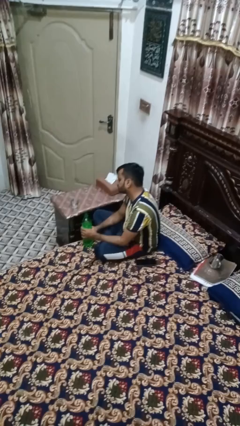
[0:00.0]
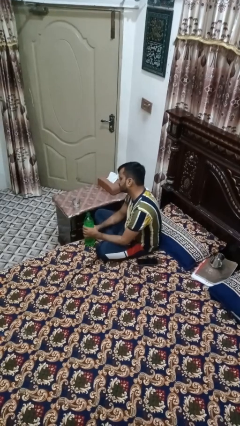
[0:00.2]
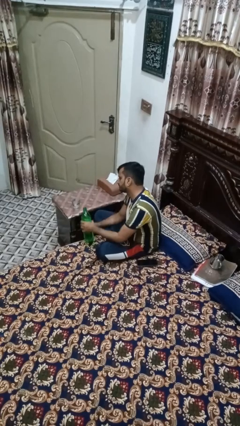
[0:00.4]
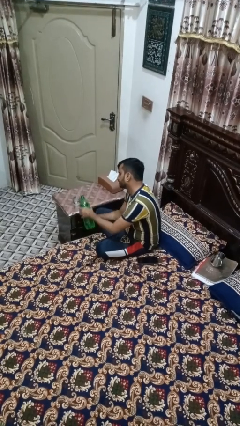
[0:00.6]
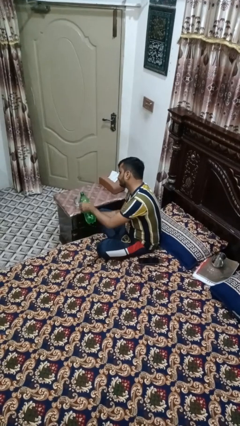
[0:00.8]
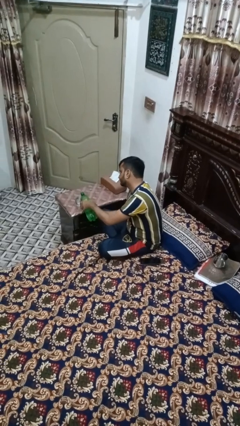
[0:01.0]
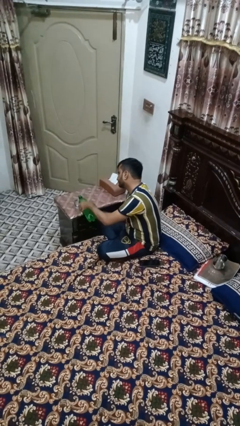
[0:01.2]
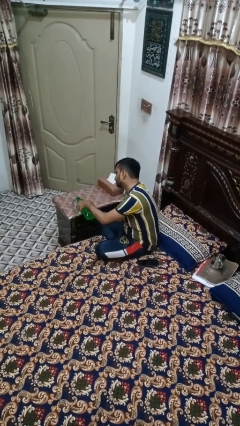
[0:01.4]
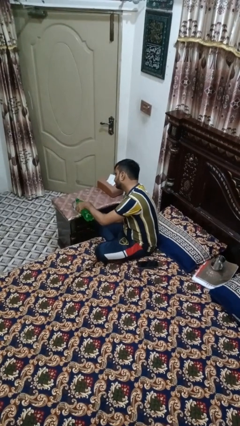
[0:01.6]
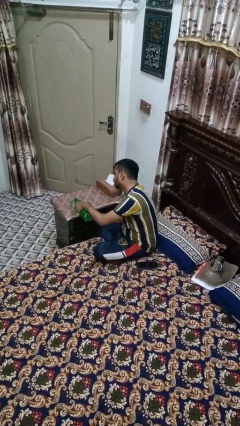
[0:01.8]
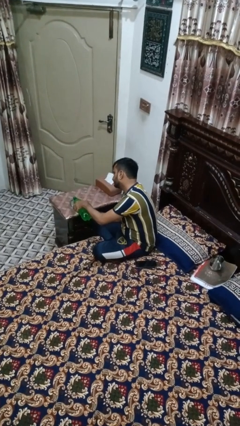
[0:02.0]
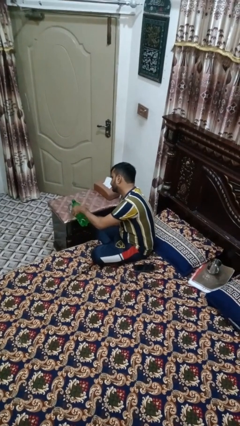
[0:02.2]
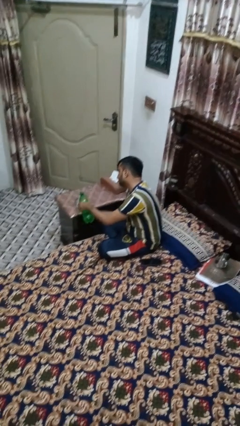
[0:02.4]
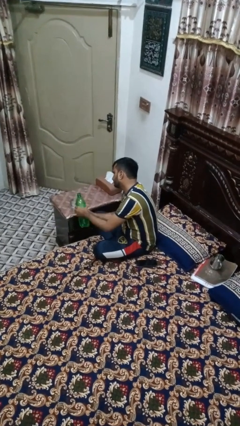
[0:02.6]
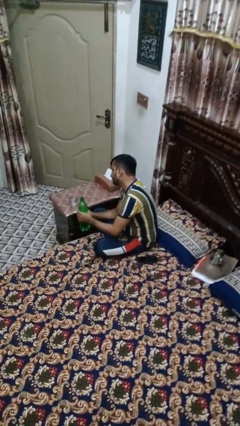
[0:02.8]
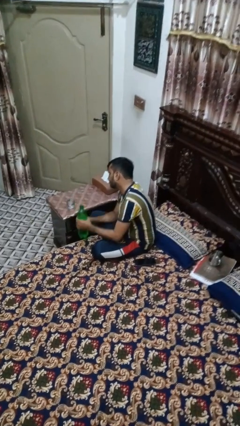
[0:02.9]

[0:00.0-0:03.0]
person pours liquid into cup

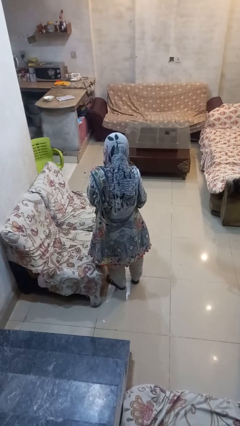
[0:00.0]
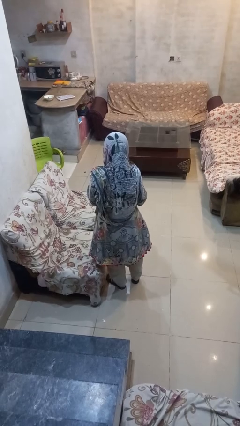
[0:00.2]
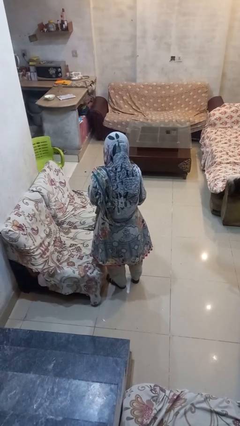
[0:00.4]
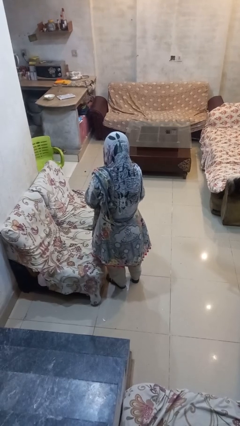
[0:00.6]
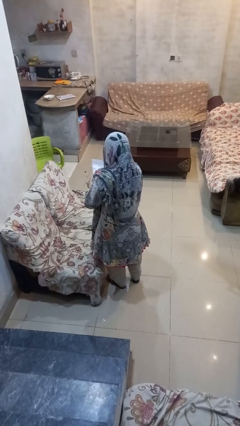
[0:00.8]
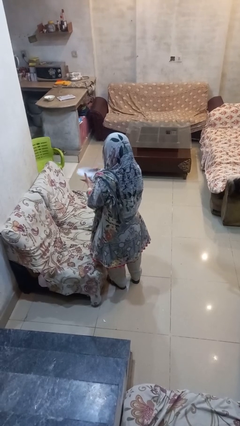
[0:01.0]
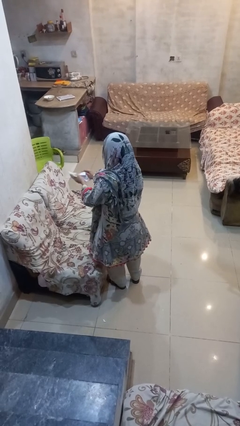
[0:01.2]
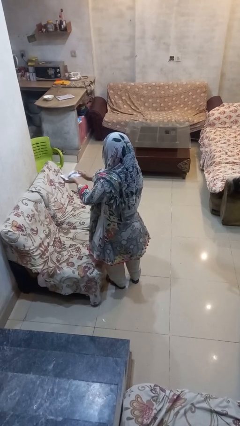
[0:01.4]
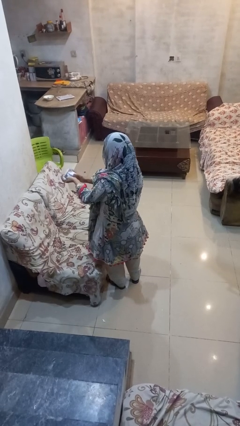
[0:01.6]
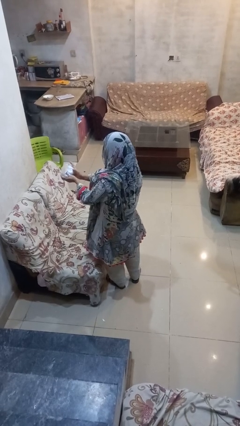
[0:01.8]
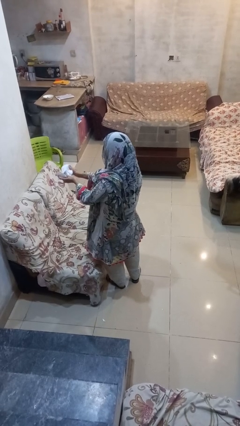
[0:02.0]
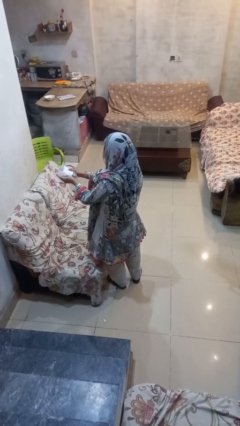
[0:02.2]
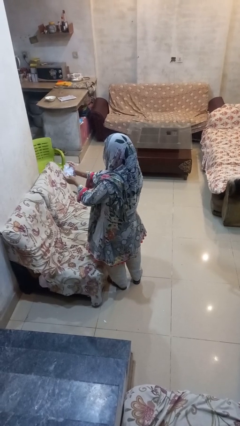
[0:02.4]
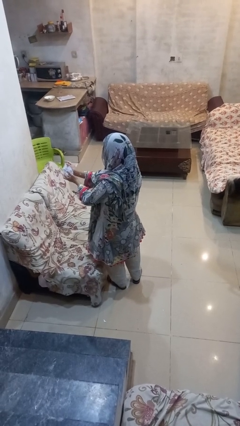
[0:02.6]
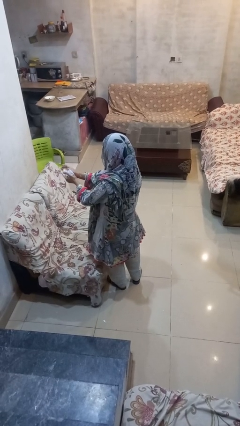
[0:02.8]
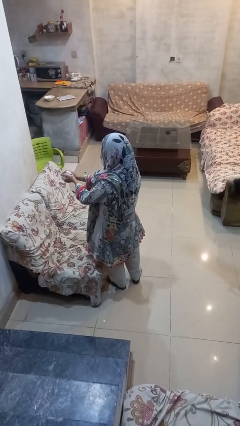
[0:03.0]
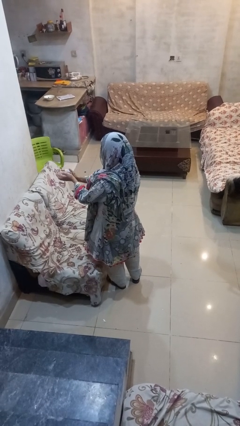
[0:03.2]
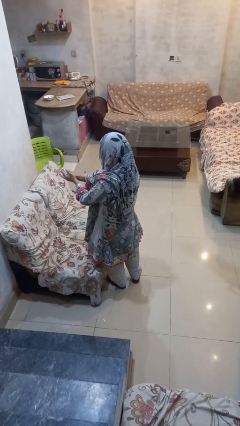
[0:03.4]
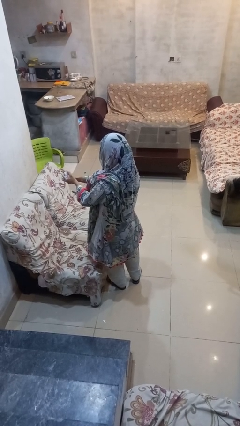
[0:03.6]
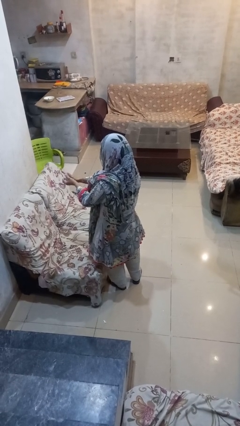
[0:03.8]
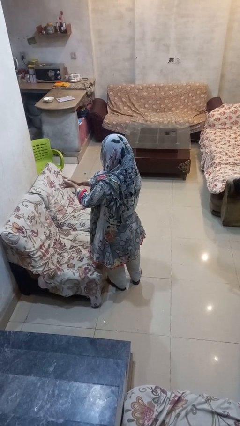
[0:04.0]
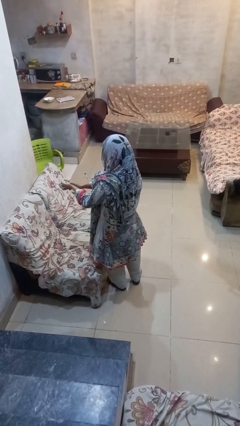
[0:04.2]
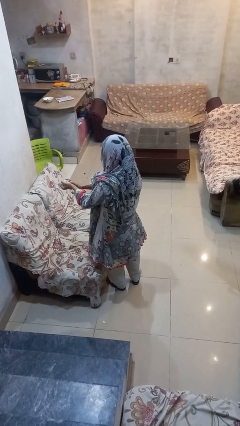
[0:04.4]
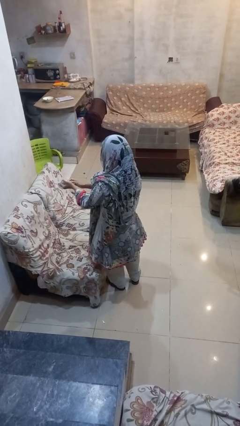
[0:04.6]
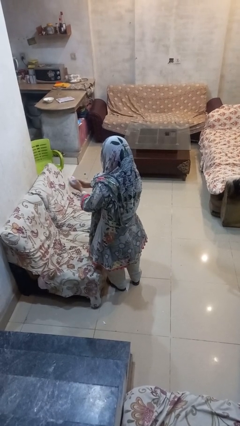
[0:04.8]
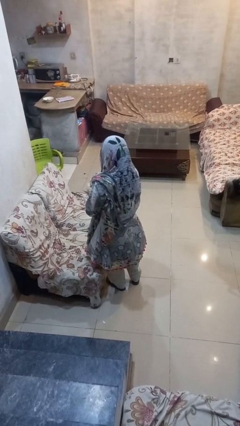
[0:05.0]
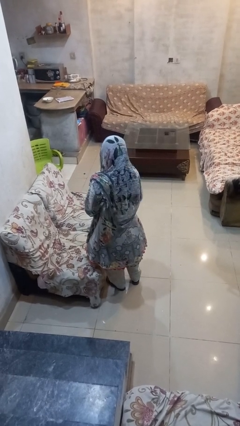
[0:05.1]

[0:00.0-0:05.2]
person crumples paper

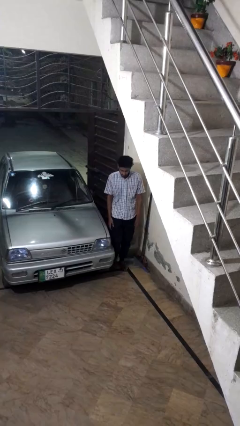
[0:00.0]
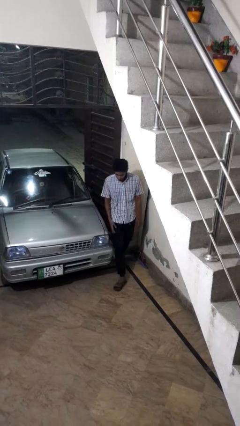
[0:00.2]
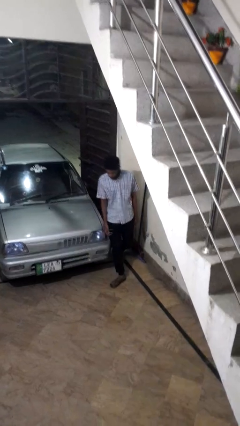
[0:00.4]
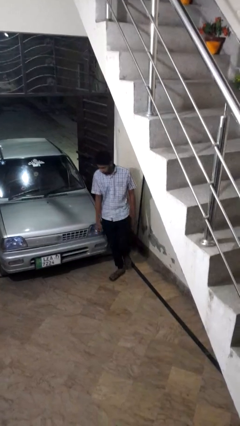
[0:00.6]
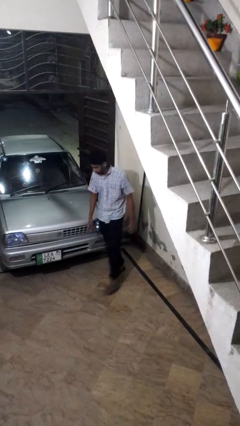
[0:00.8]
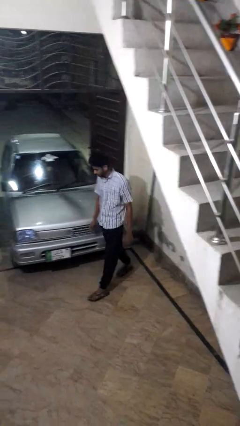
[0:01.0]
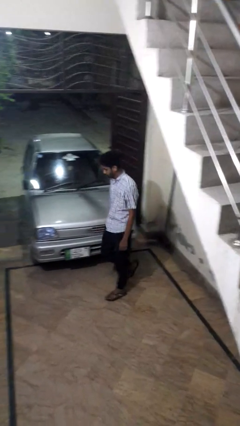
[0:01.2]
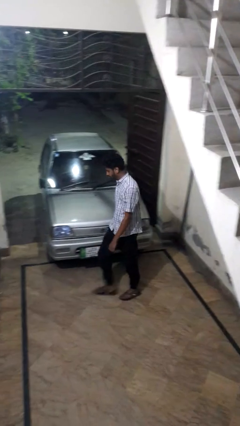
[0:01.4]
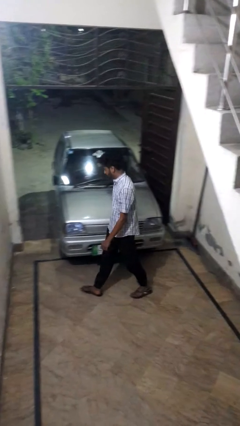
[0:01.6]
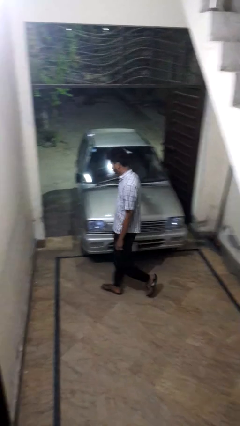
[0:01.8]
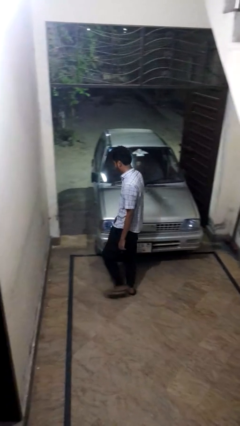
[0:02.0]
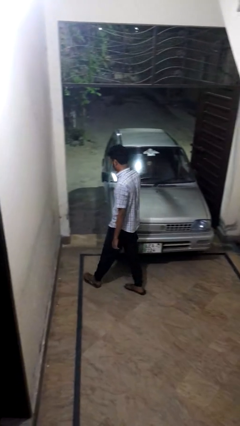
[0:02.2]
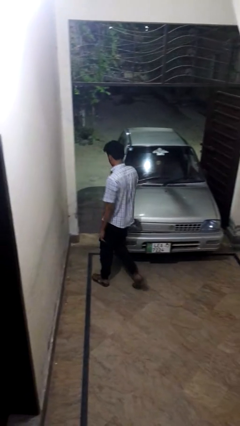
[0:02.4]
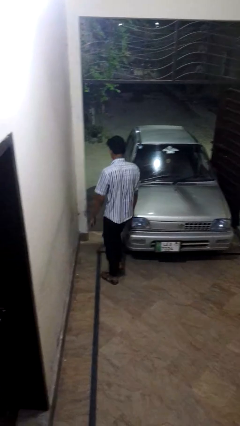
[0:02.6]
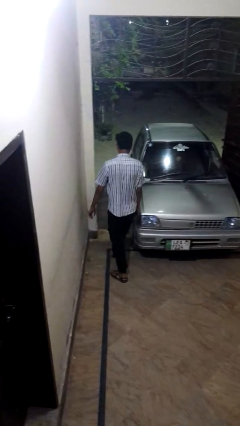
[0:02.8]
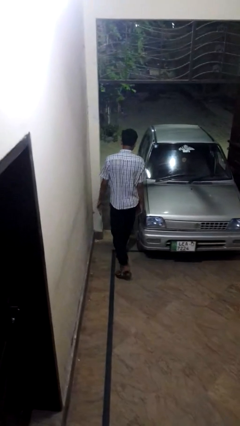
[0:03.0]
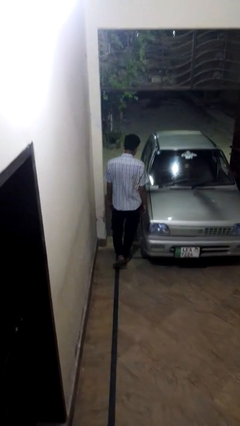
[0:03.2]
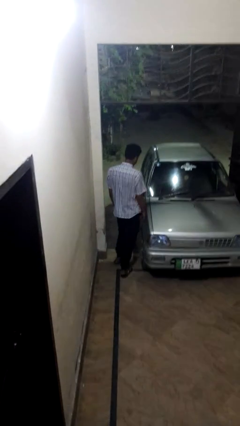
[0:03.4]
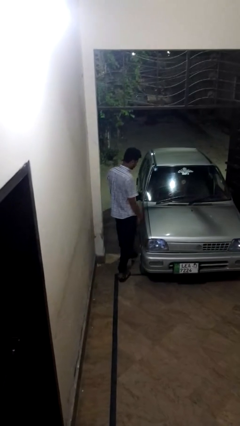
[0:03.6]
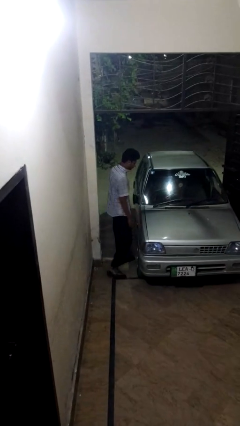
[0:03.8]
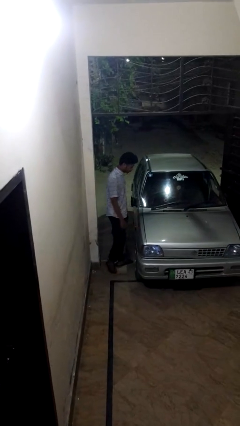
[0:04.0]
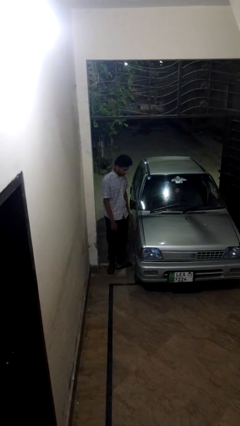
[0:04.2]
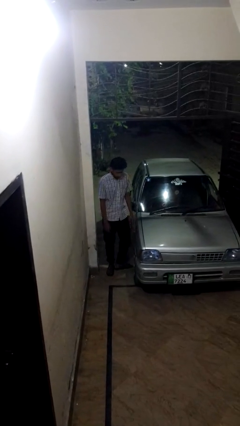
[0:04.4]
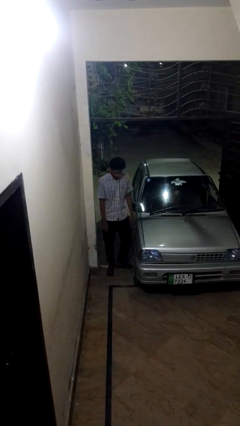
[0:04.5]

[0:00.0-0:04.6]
person walks around car

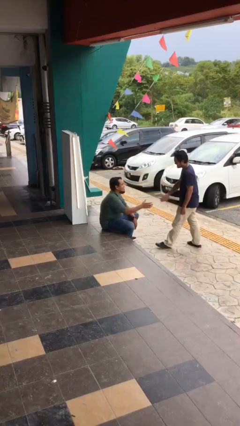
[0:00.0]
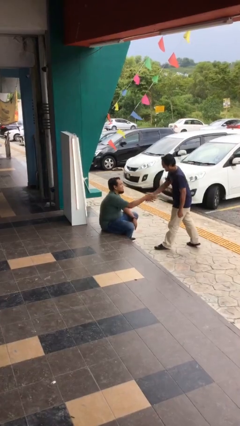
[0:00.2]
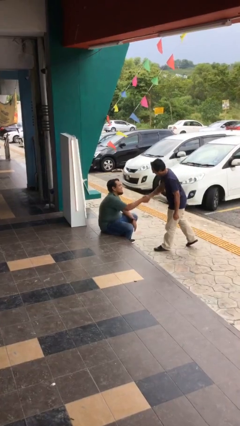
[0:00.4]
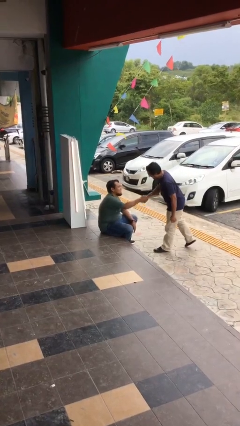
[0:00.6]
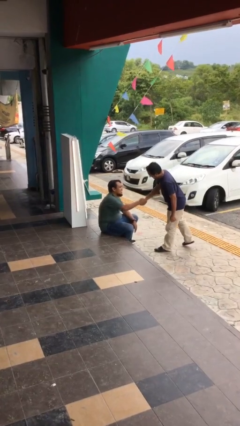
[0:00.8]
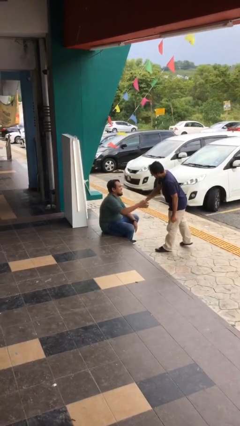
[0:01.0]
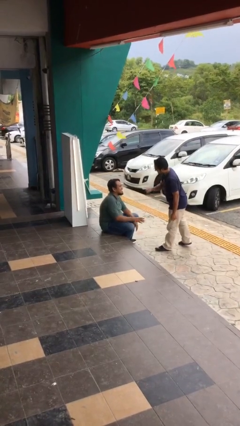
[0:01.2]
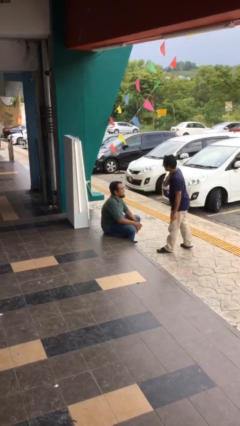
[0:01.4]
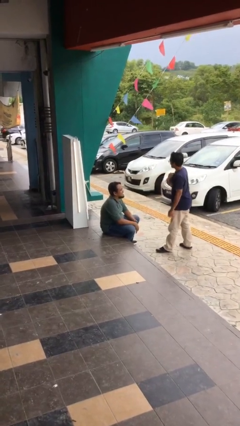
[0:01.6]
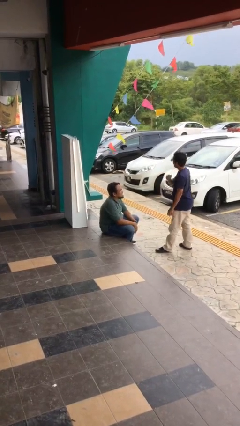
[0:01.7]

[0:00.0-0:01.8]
person shakes hand

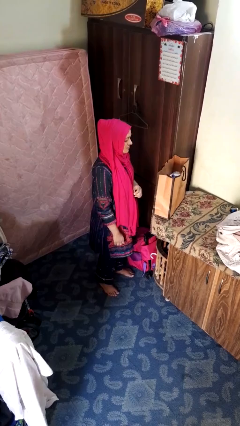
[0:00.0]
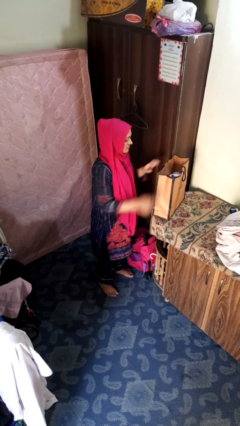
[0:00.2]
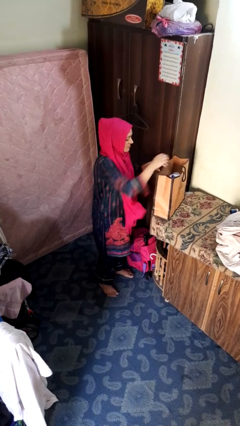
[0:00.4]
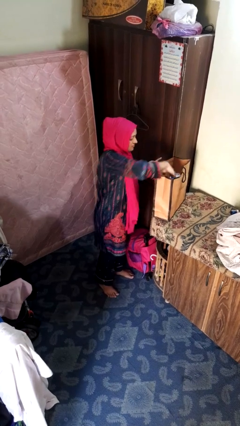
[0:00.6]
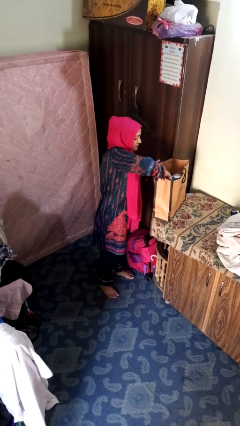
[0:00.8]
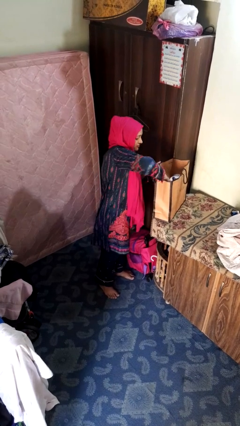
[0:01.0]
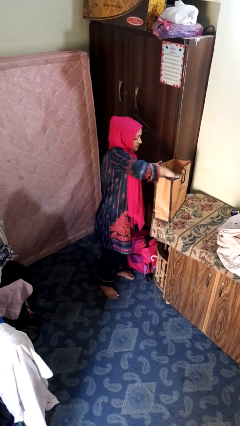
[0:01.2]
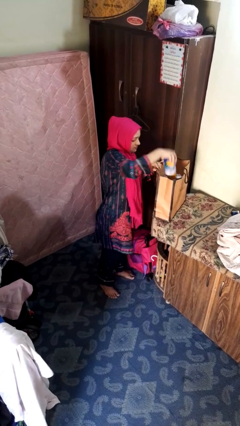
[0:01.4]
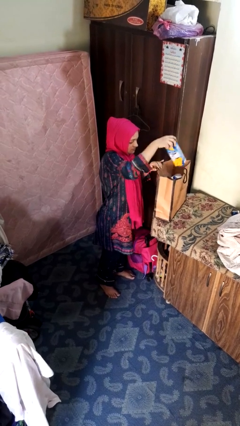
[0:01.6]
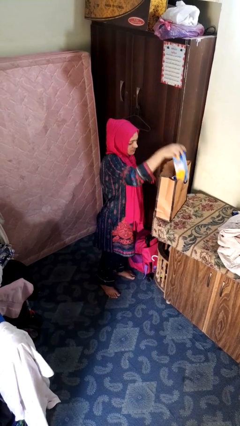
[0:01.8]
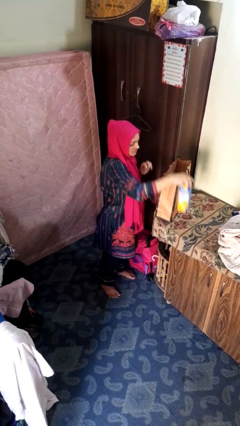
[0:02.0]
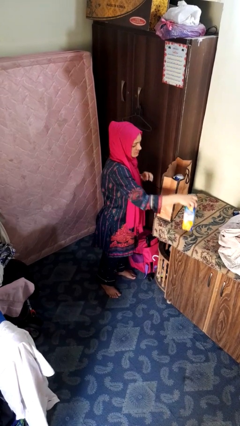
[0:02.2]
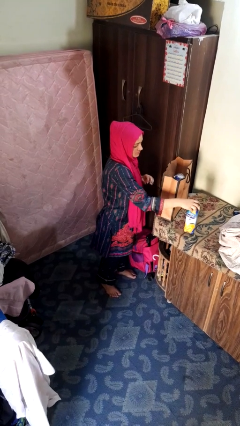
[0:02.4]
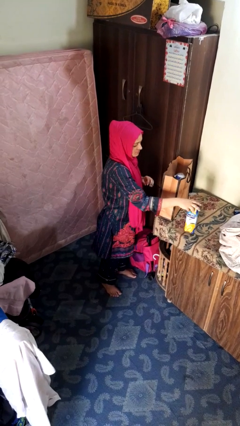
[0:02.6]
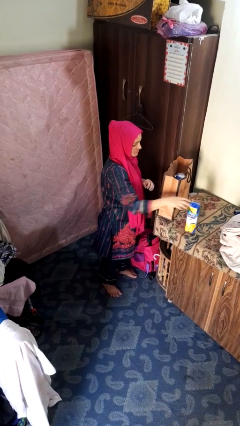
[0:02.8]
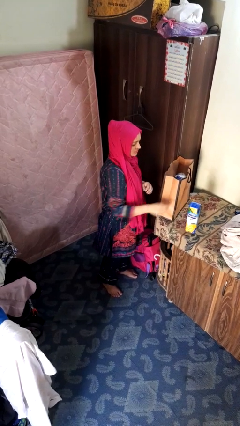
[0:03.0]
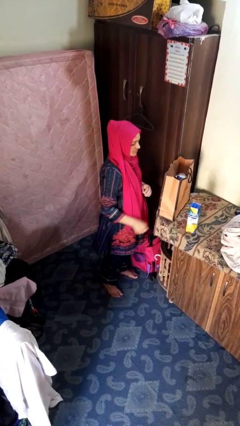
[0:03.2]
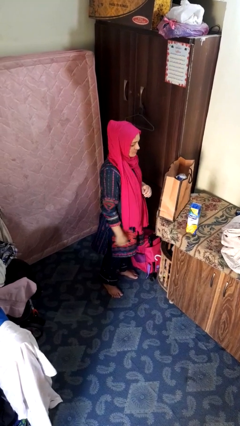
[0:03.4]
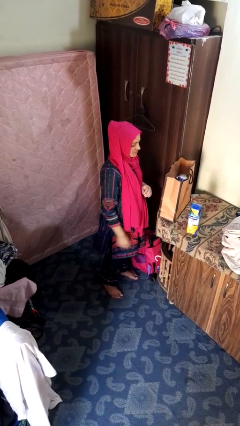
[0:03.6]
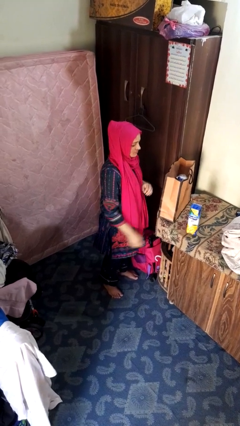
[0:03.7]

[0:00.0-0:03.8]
person takes object from bag
